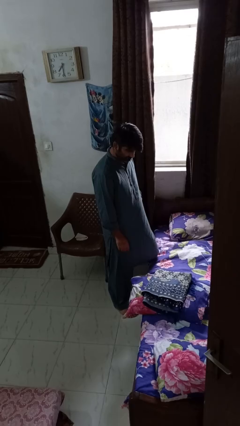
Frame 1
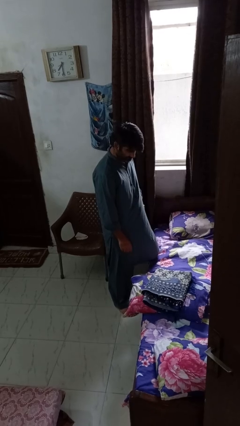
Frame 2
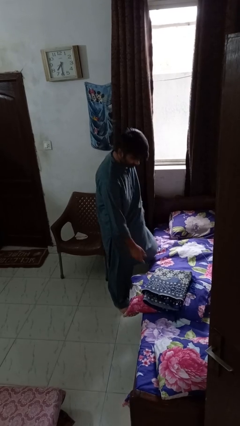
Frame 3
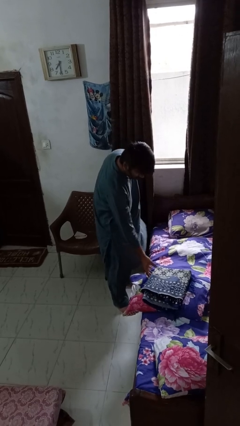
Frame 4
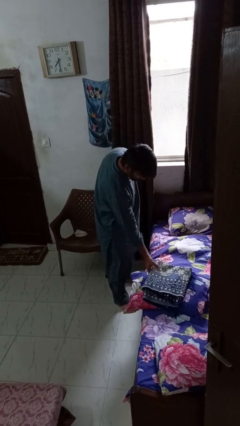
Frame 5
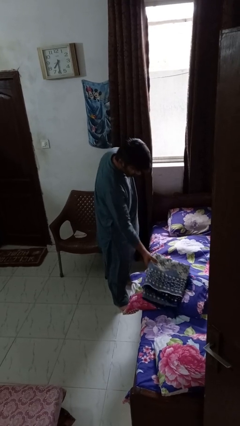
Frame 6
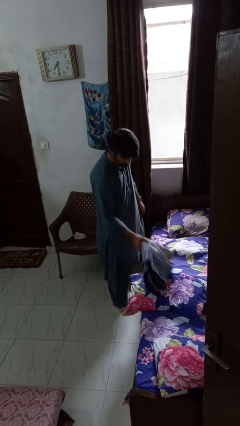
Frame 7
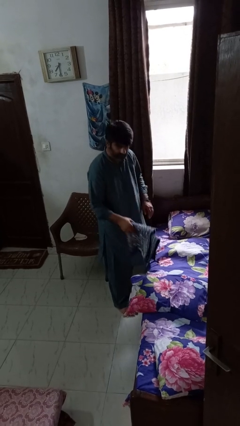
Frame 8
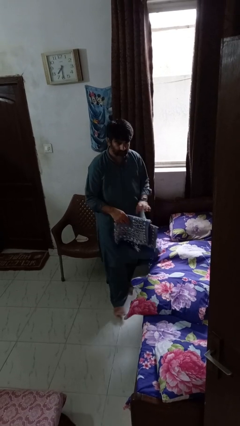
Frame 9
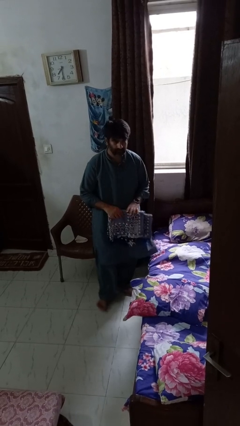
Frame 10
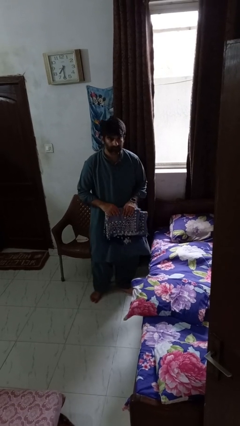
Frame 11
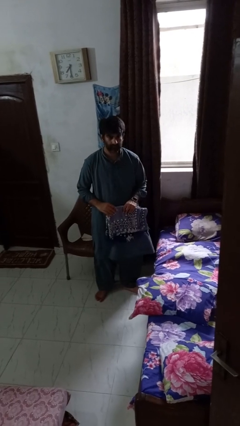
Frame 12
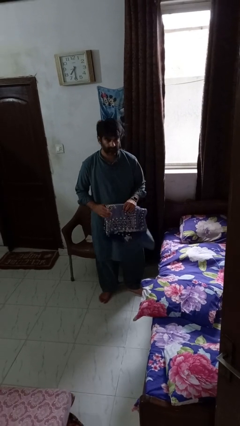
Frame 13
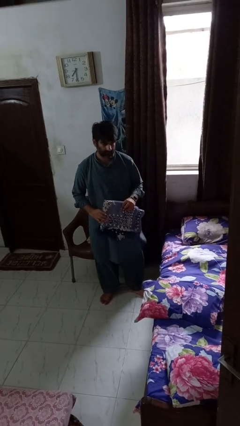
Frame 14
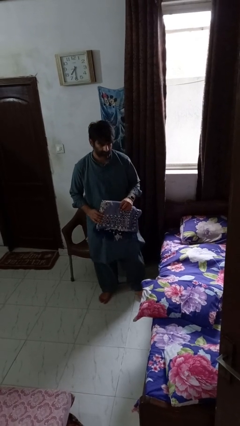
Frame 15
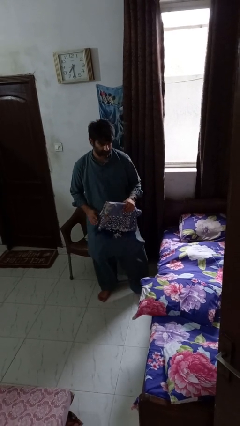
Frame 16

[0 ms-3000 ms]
person picks up object from bed

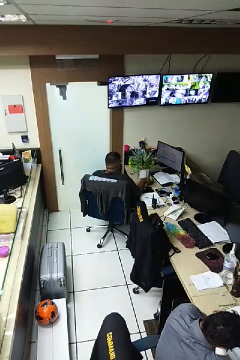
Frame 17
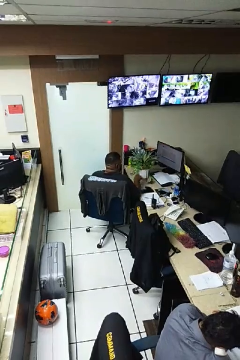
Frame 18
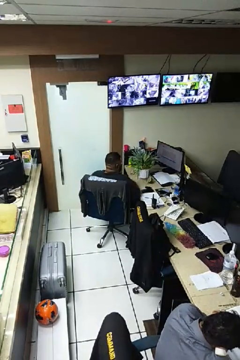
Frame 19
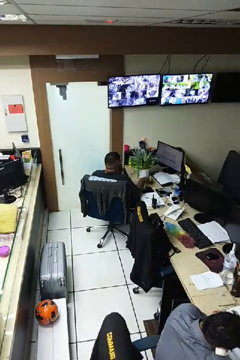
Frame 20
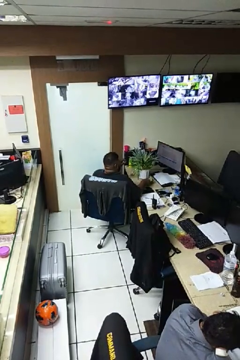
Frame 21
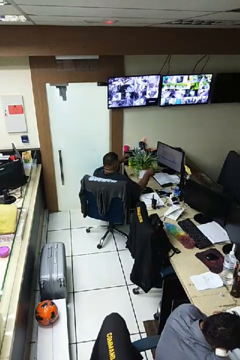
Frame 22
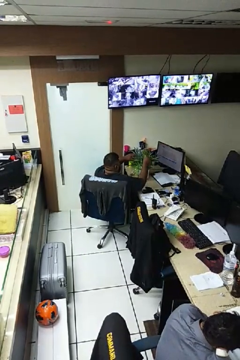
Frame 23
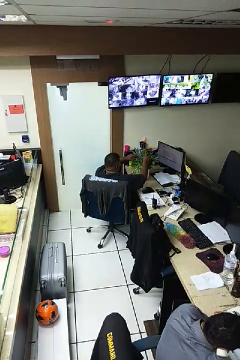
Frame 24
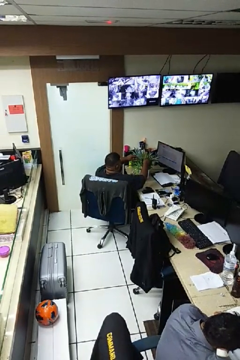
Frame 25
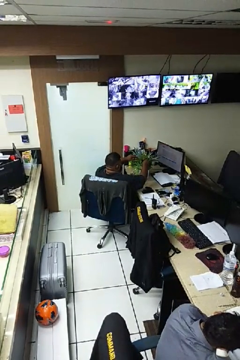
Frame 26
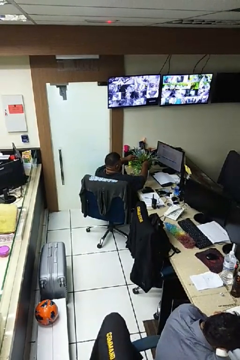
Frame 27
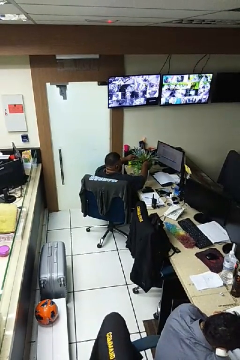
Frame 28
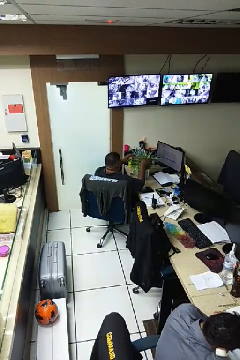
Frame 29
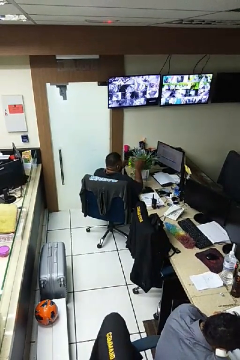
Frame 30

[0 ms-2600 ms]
person arranges flowers in vase

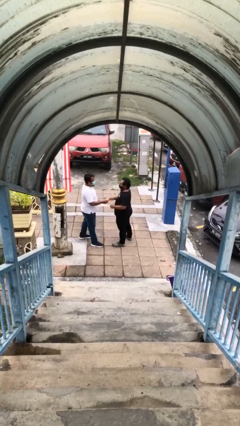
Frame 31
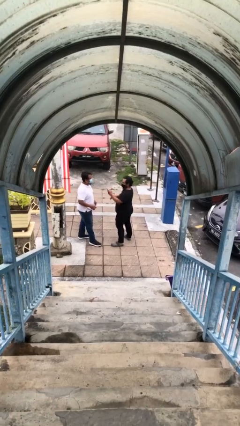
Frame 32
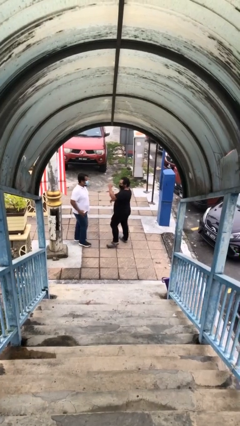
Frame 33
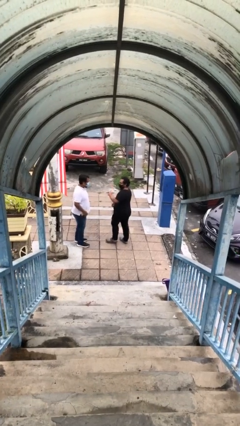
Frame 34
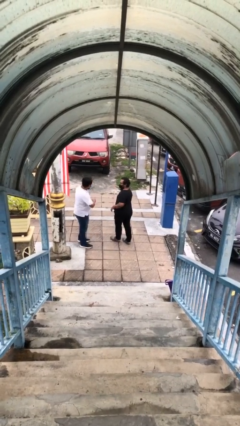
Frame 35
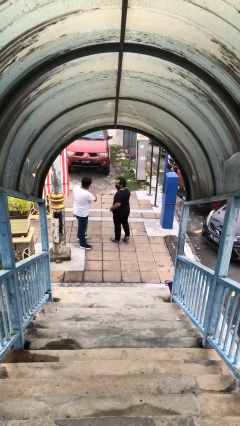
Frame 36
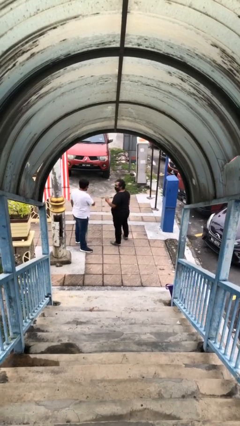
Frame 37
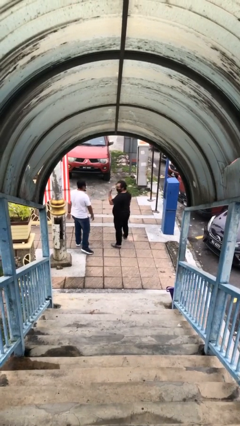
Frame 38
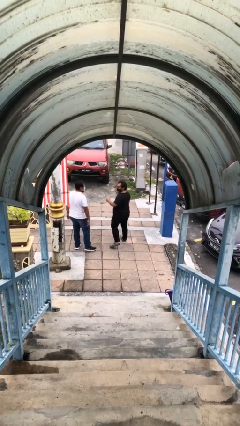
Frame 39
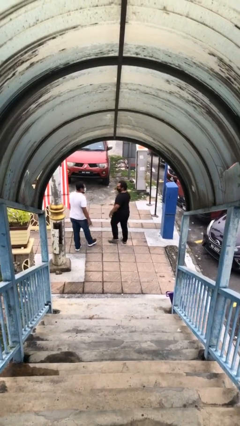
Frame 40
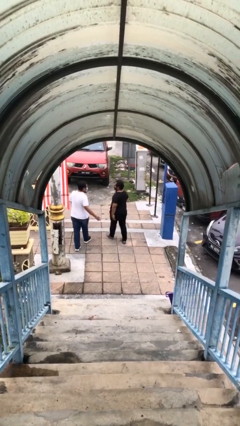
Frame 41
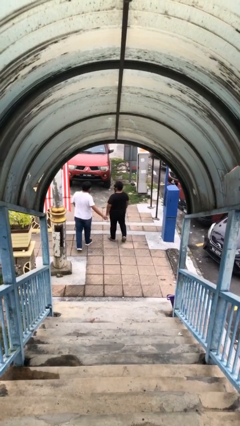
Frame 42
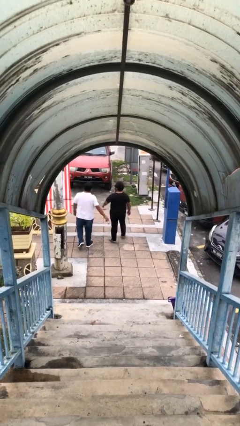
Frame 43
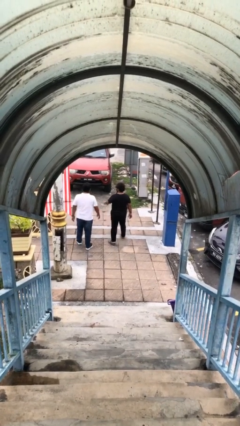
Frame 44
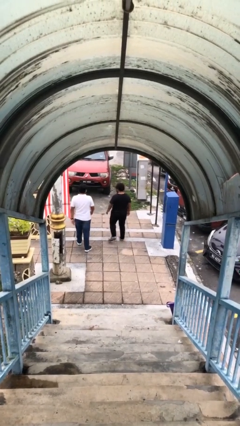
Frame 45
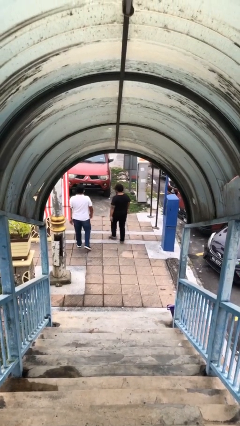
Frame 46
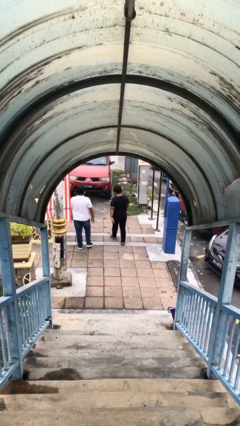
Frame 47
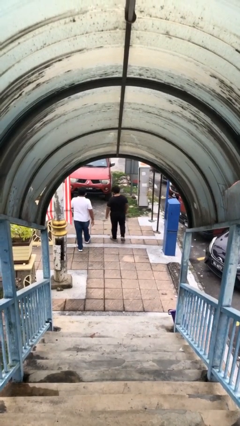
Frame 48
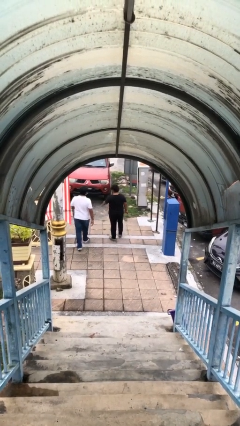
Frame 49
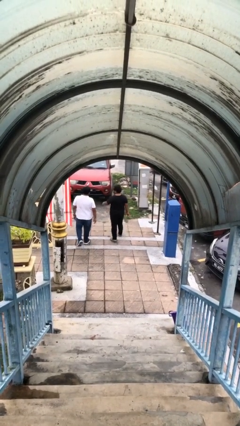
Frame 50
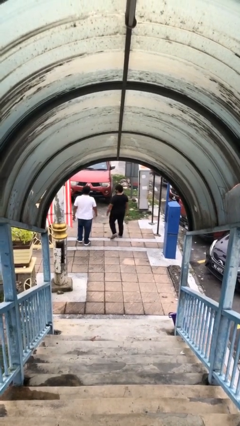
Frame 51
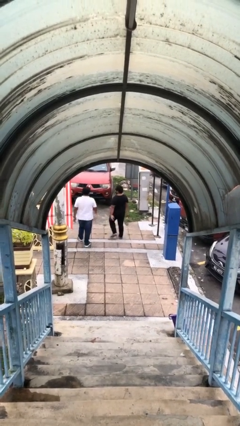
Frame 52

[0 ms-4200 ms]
person talks to person

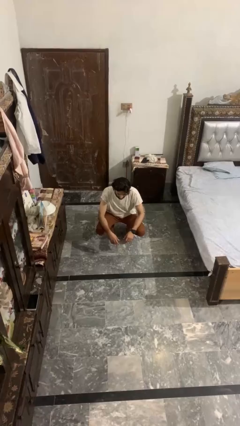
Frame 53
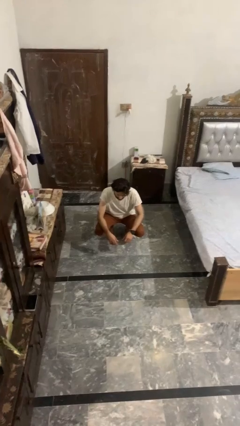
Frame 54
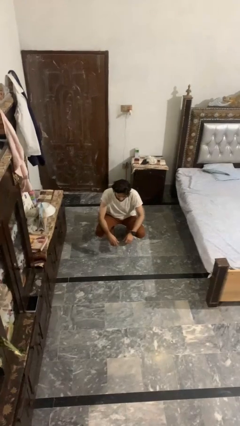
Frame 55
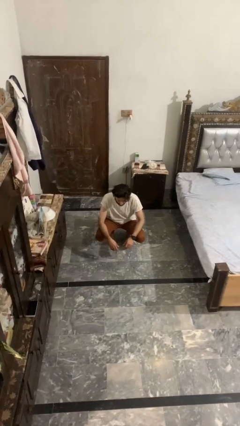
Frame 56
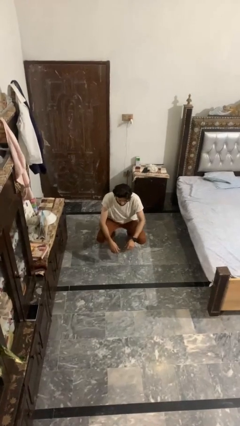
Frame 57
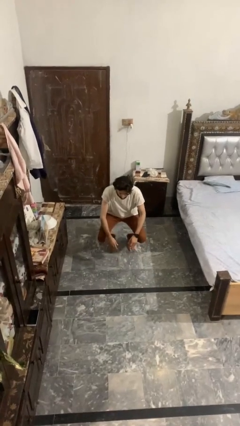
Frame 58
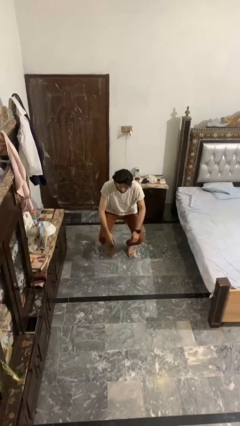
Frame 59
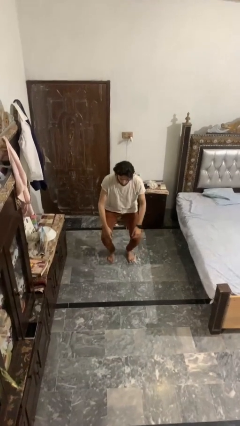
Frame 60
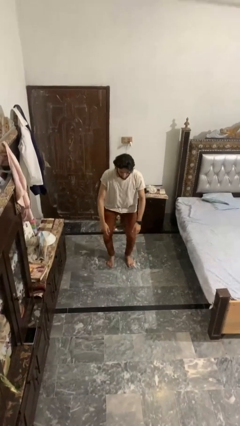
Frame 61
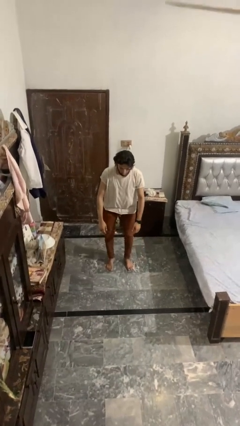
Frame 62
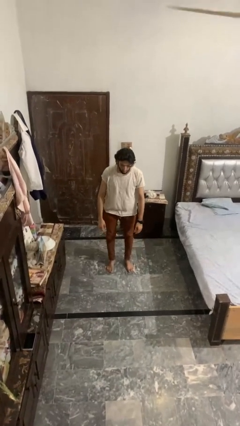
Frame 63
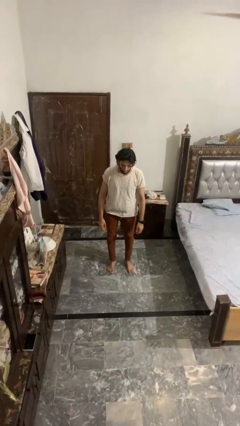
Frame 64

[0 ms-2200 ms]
person stands up

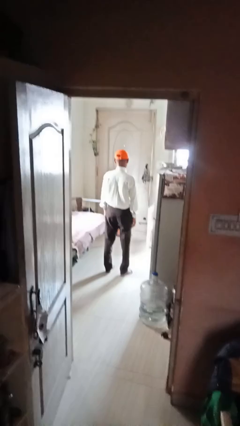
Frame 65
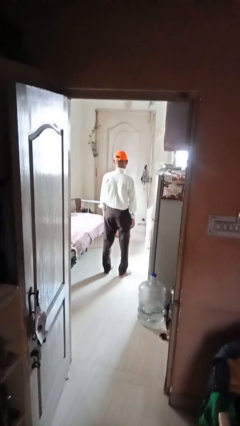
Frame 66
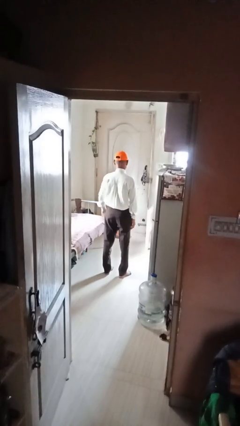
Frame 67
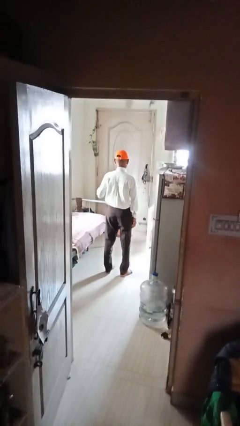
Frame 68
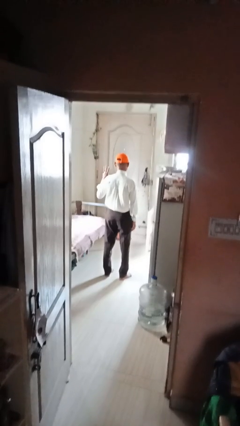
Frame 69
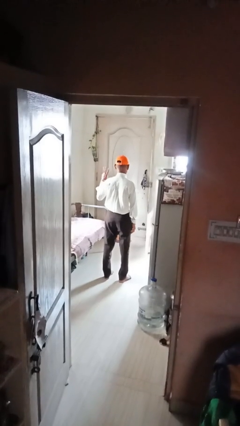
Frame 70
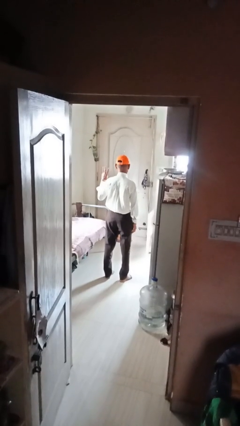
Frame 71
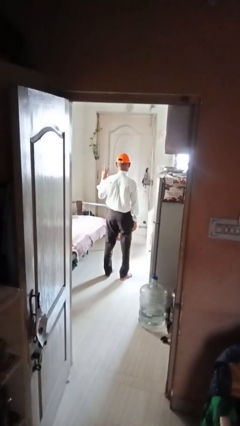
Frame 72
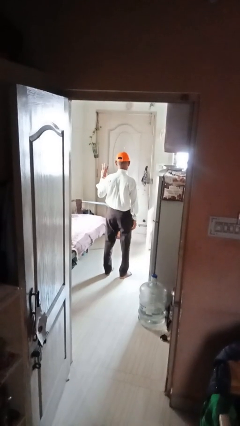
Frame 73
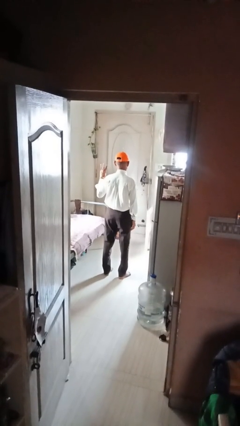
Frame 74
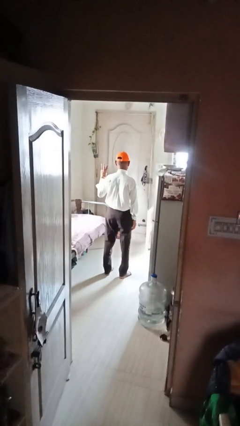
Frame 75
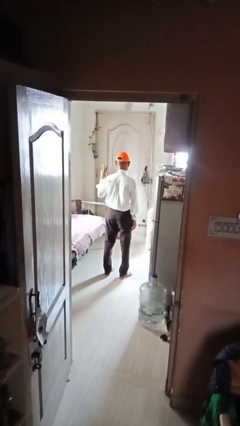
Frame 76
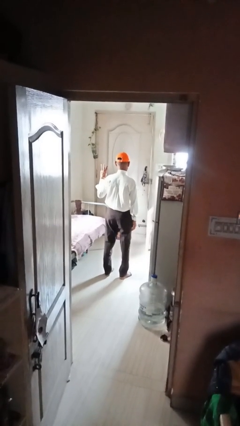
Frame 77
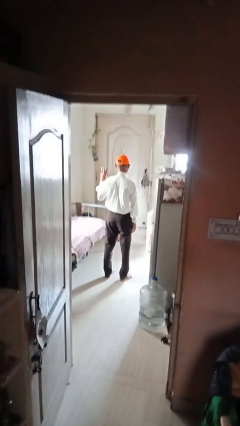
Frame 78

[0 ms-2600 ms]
person gestures number three

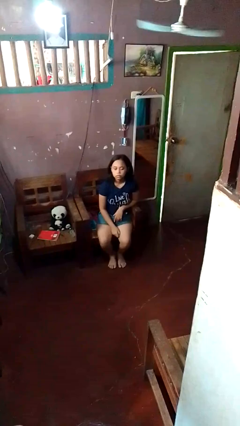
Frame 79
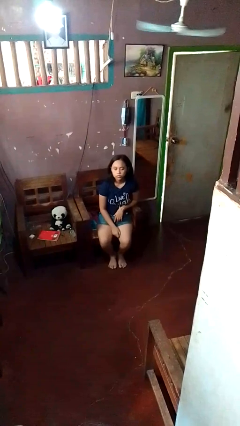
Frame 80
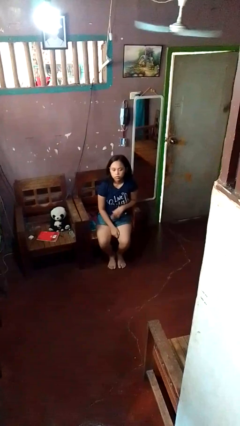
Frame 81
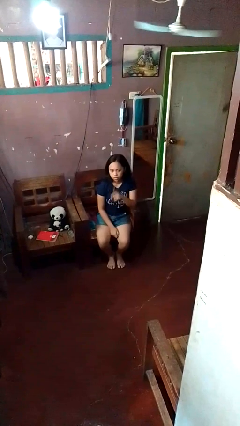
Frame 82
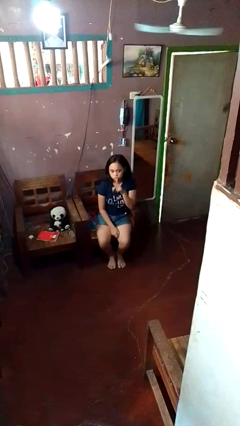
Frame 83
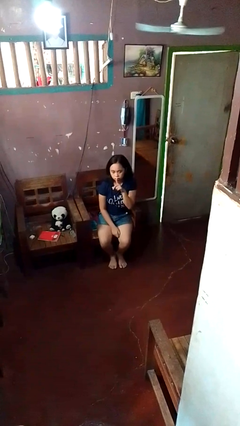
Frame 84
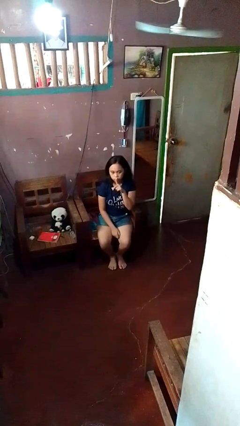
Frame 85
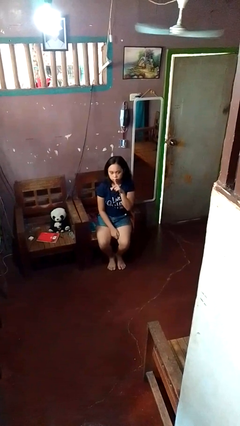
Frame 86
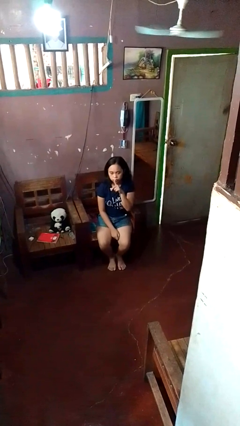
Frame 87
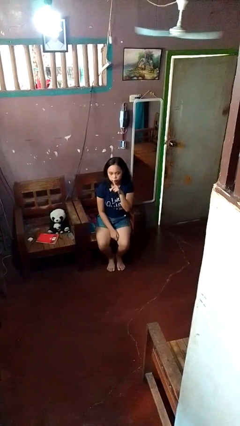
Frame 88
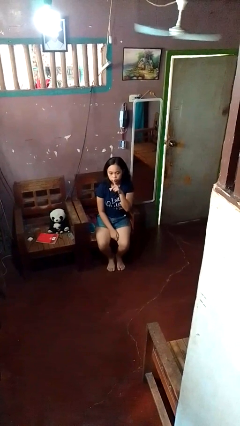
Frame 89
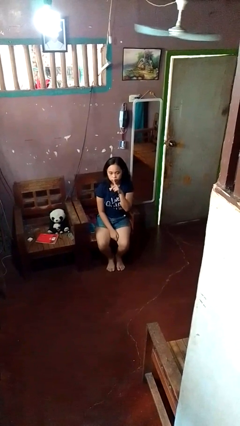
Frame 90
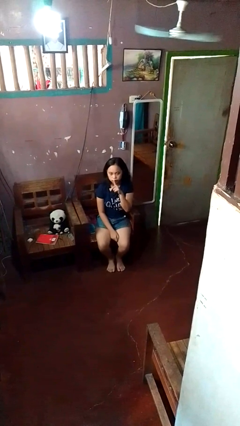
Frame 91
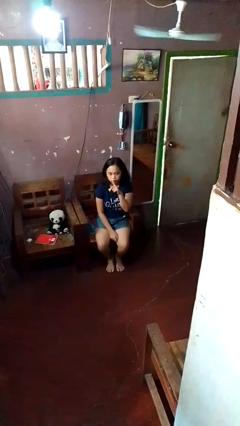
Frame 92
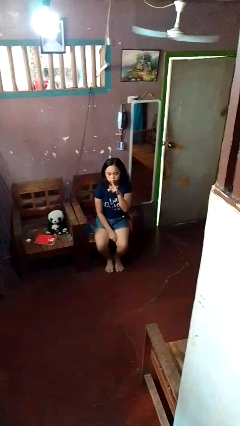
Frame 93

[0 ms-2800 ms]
person gestures be quiet

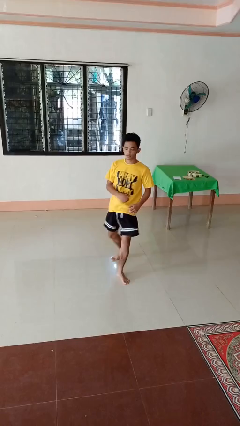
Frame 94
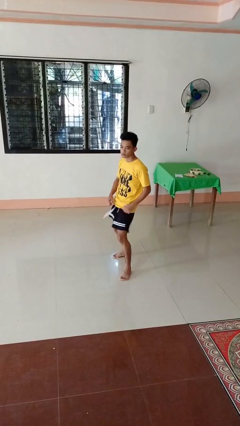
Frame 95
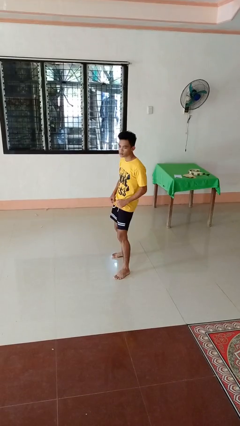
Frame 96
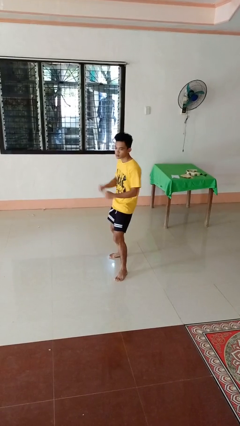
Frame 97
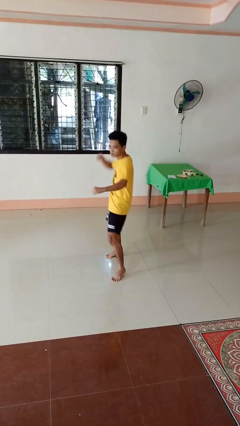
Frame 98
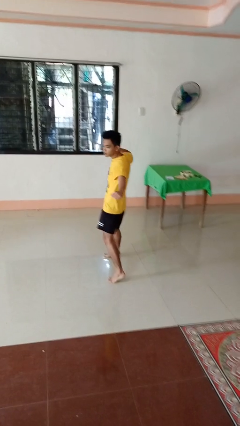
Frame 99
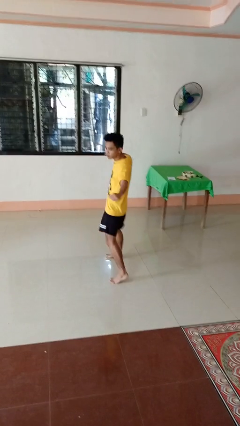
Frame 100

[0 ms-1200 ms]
person karate kicks
